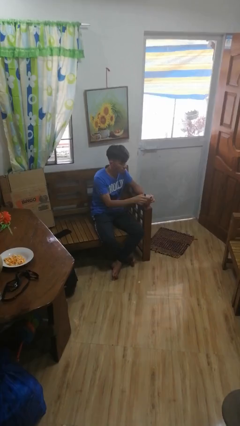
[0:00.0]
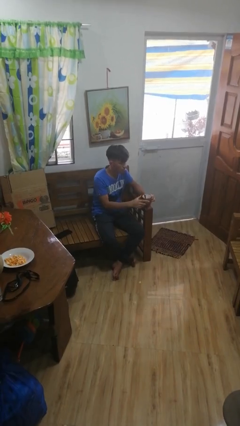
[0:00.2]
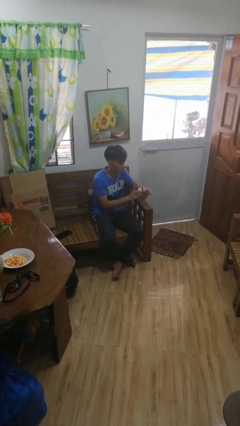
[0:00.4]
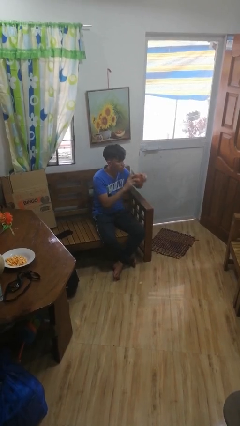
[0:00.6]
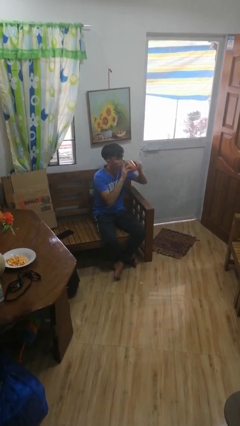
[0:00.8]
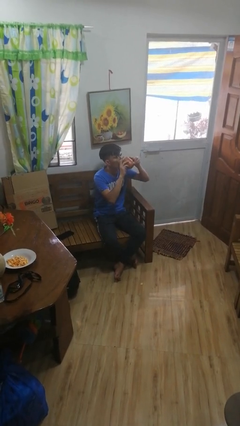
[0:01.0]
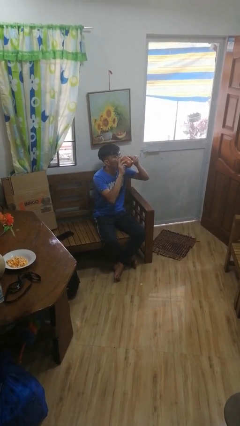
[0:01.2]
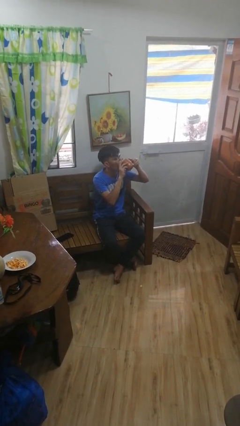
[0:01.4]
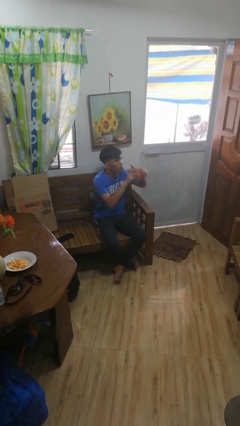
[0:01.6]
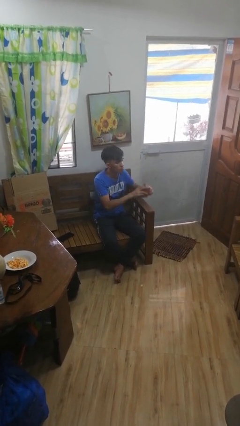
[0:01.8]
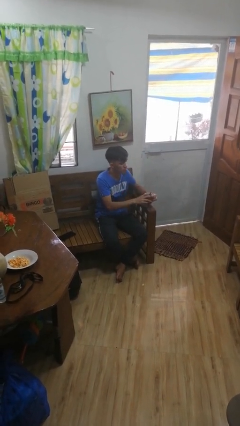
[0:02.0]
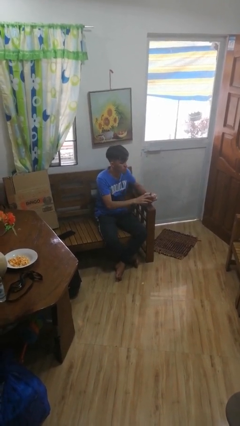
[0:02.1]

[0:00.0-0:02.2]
person drinks from mug

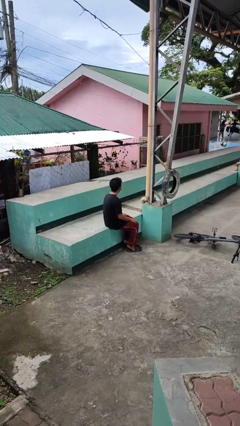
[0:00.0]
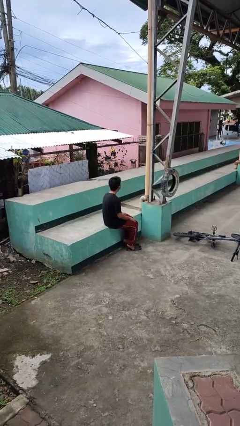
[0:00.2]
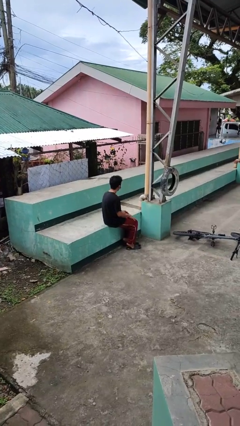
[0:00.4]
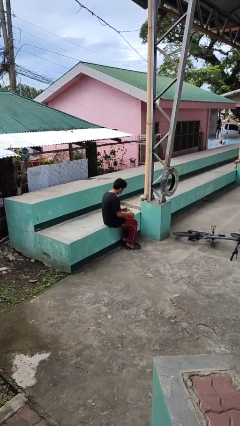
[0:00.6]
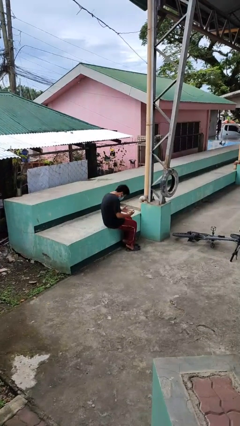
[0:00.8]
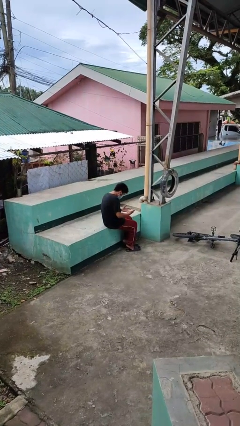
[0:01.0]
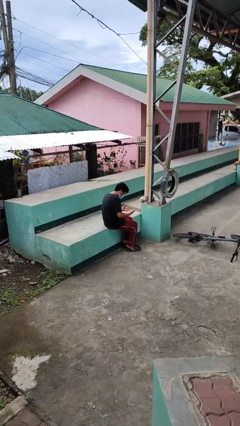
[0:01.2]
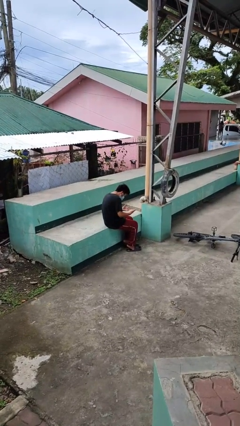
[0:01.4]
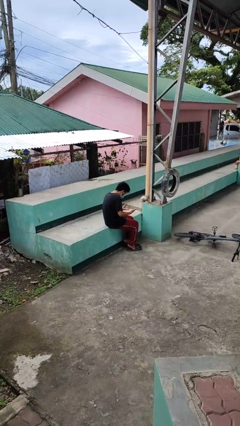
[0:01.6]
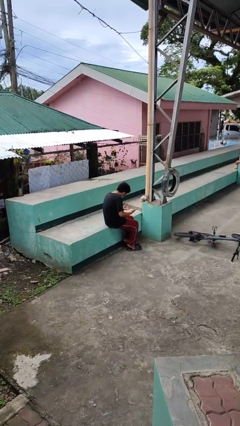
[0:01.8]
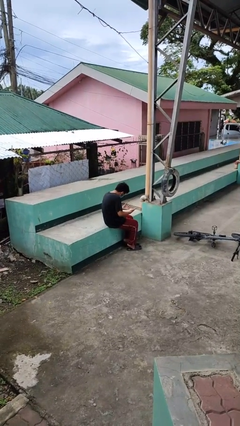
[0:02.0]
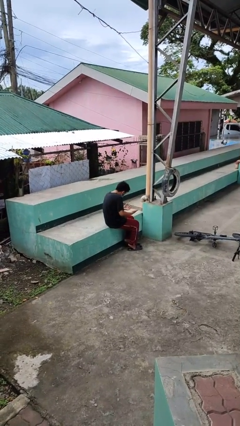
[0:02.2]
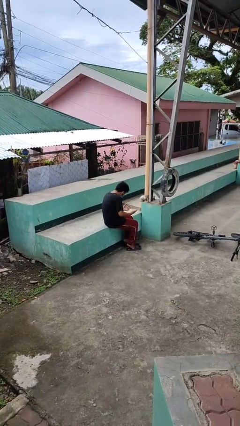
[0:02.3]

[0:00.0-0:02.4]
person looks at hands in lap

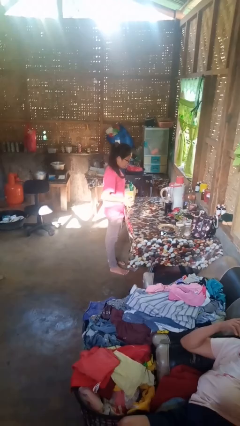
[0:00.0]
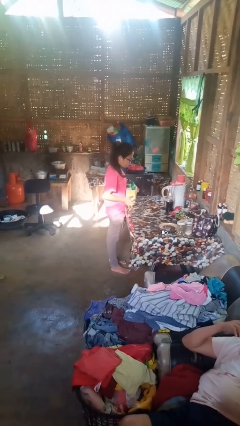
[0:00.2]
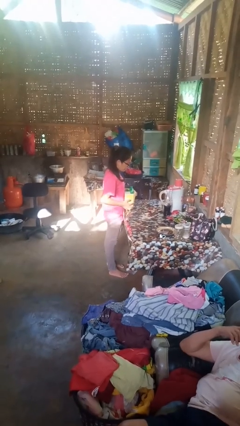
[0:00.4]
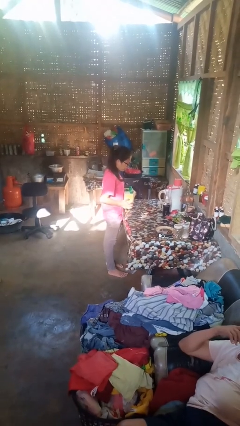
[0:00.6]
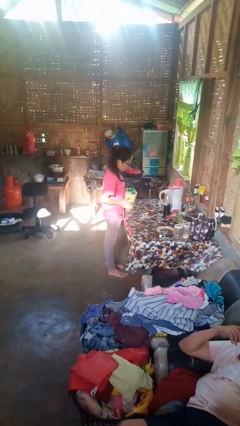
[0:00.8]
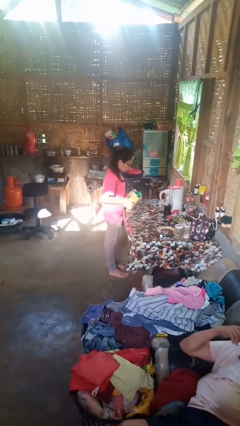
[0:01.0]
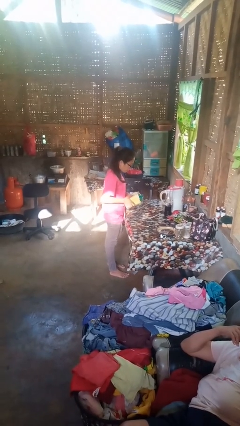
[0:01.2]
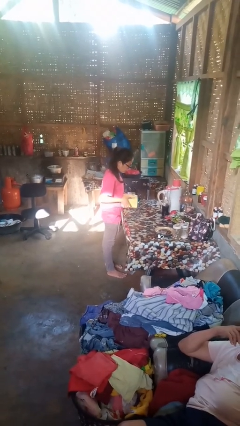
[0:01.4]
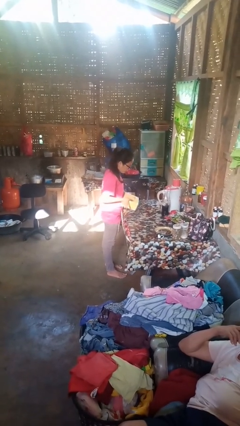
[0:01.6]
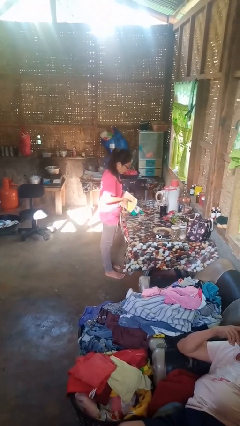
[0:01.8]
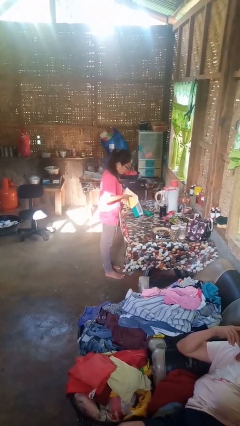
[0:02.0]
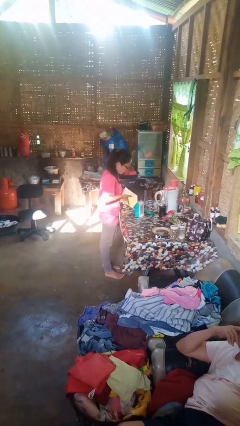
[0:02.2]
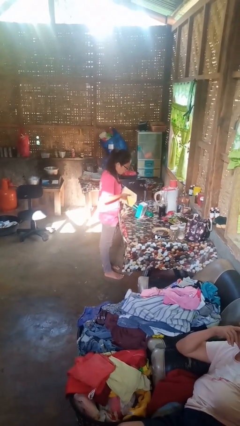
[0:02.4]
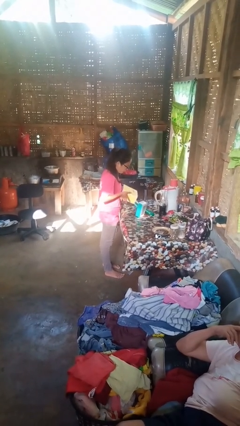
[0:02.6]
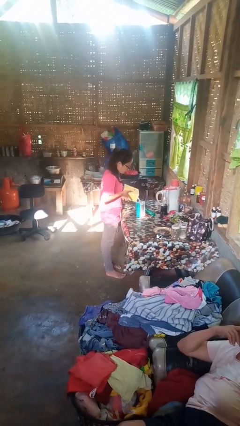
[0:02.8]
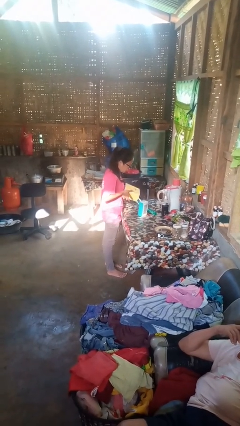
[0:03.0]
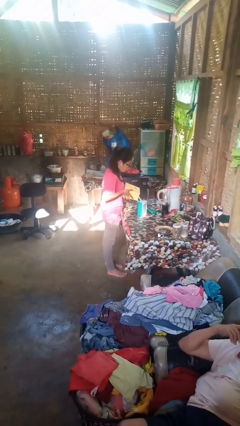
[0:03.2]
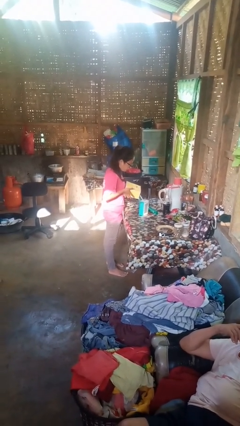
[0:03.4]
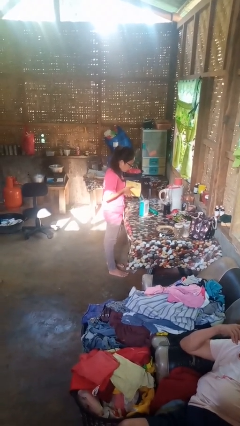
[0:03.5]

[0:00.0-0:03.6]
person unloads box onto table

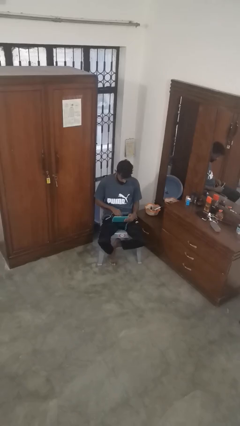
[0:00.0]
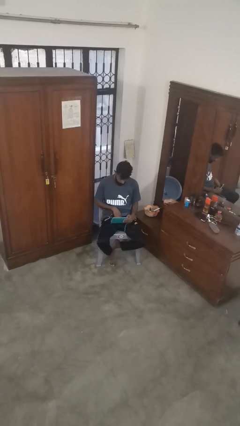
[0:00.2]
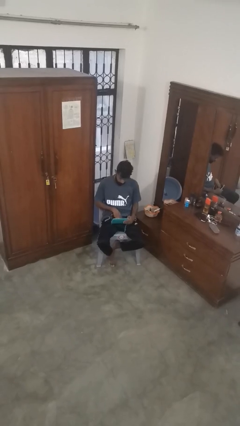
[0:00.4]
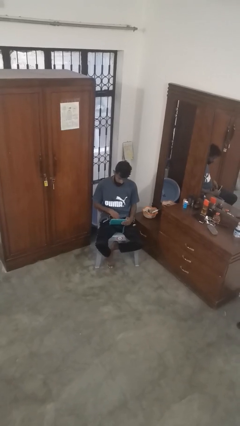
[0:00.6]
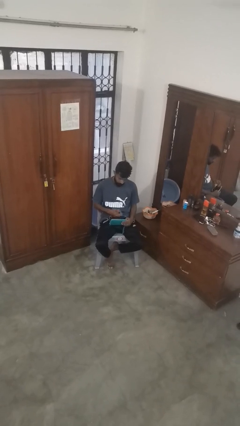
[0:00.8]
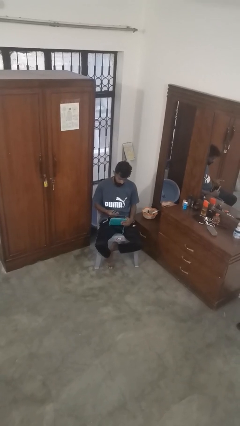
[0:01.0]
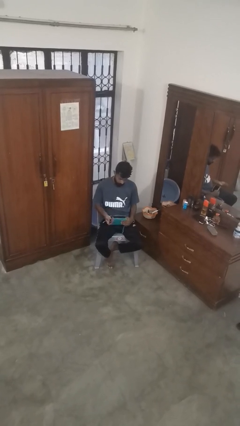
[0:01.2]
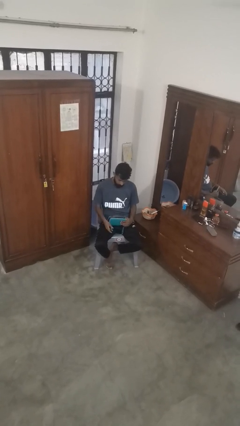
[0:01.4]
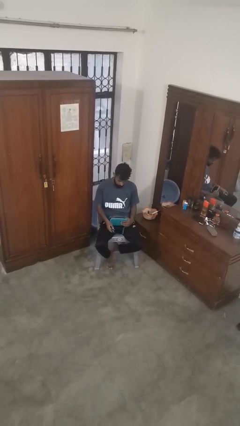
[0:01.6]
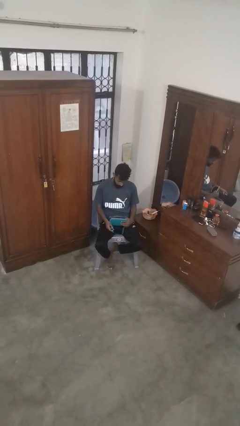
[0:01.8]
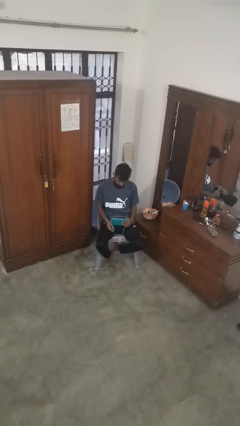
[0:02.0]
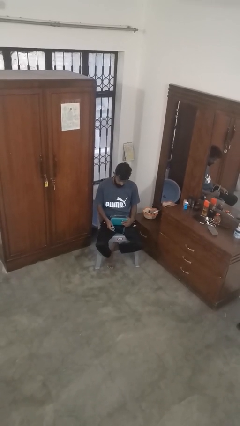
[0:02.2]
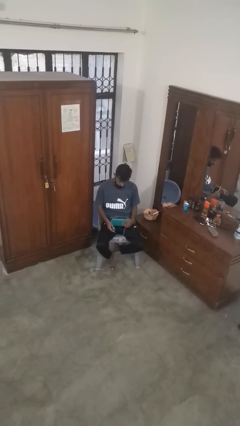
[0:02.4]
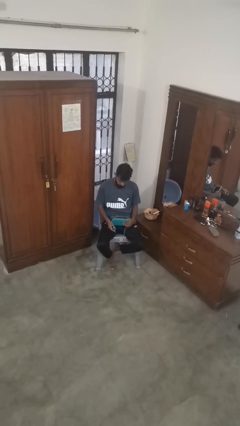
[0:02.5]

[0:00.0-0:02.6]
person takes object from purse

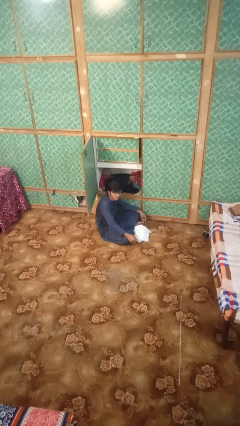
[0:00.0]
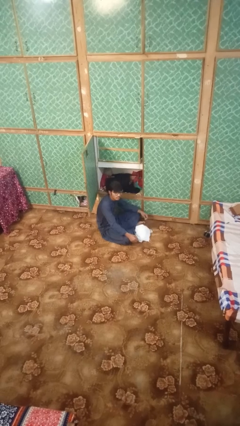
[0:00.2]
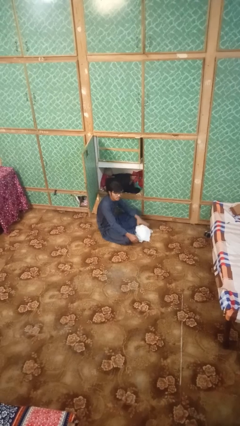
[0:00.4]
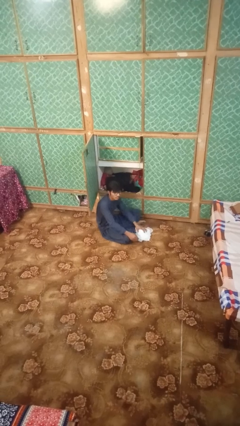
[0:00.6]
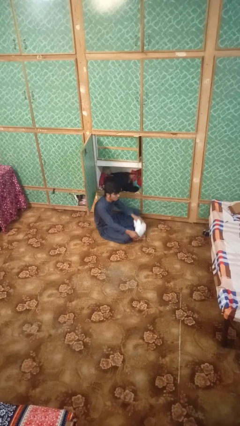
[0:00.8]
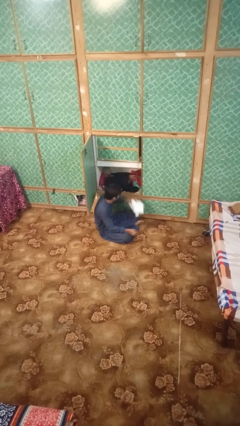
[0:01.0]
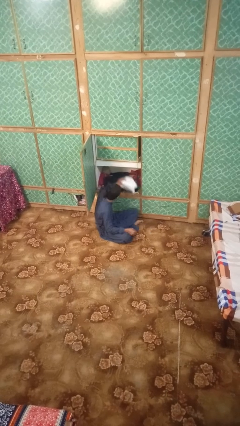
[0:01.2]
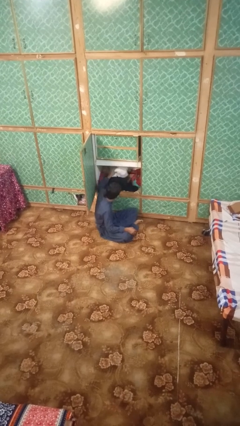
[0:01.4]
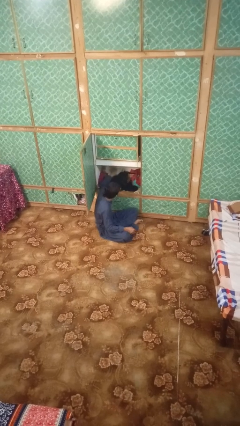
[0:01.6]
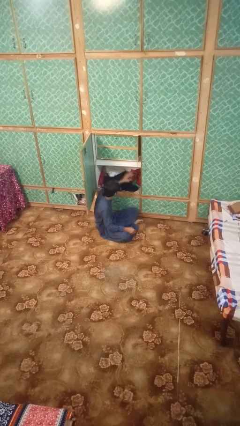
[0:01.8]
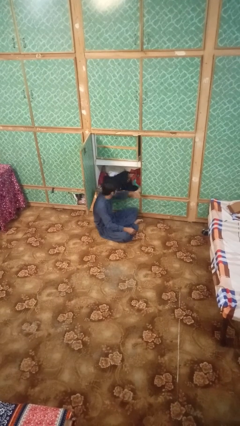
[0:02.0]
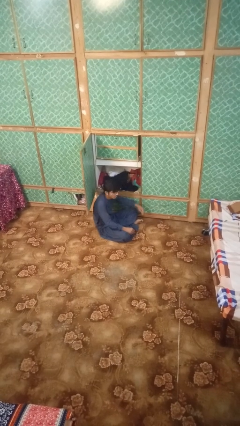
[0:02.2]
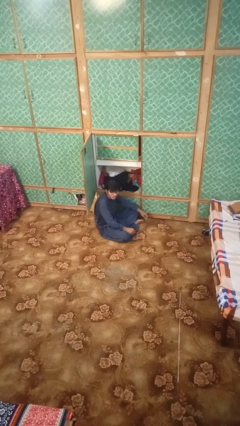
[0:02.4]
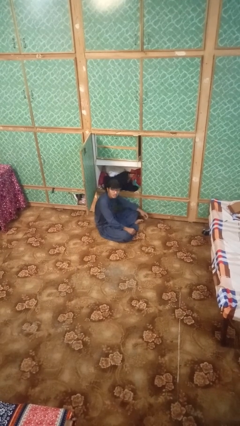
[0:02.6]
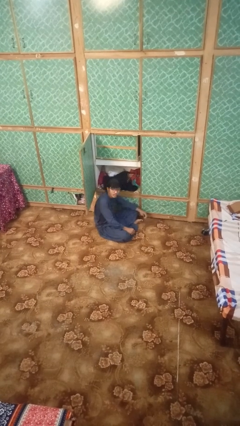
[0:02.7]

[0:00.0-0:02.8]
person puts clothes into dresser

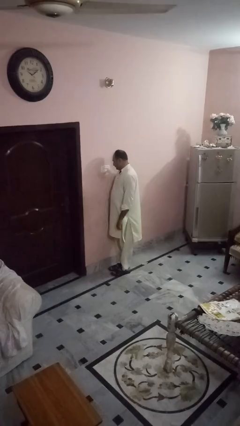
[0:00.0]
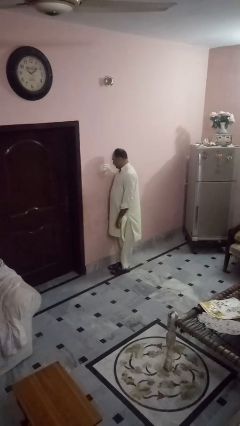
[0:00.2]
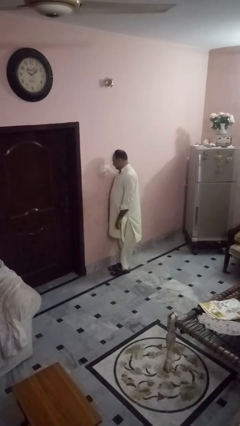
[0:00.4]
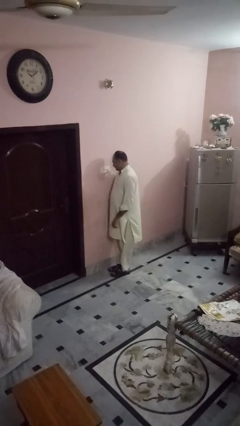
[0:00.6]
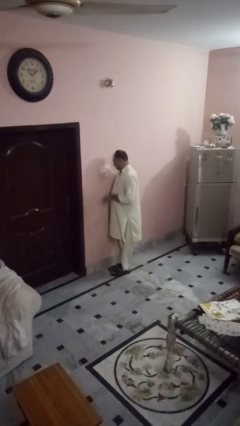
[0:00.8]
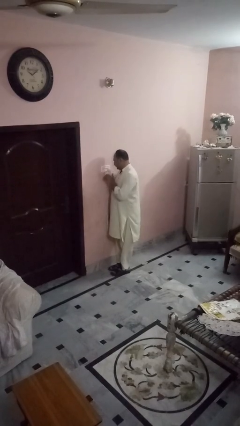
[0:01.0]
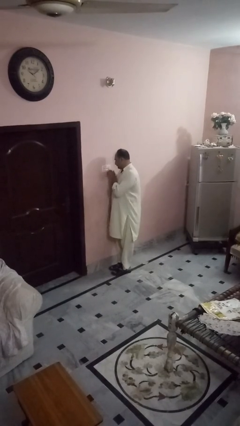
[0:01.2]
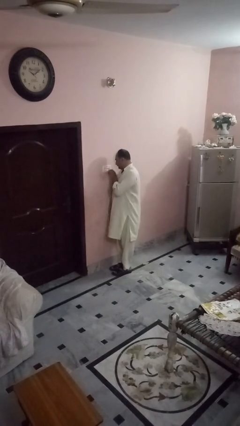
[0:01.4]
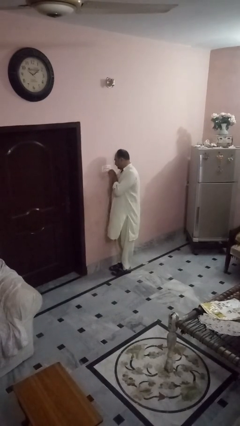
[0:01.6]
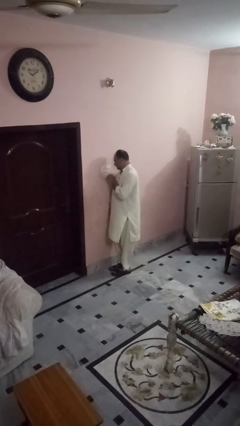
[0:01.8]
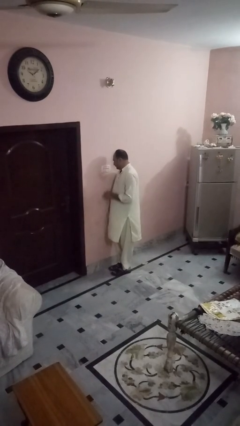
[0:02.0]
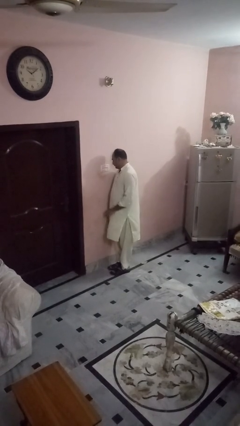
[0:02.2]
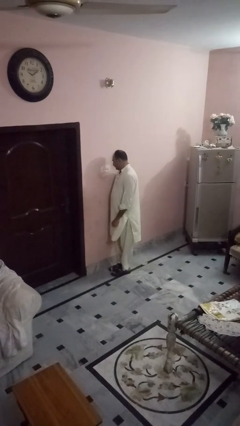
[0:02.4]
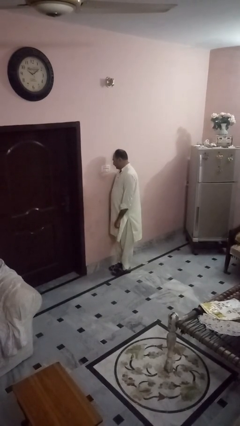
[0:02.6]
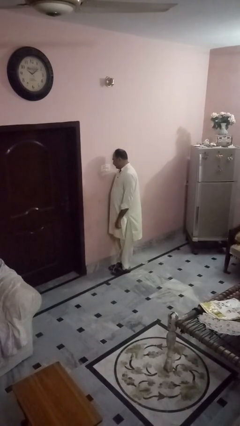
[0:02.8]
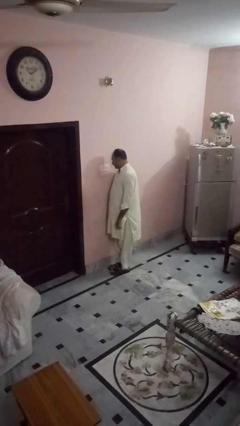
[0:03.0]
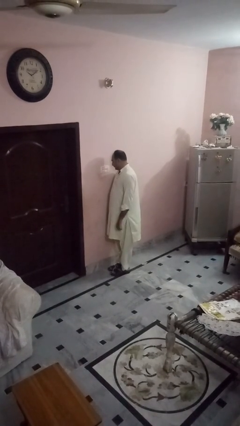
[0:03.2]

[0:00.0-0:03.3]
person unplugs from electrical socket

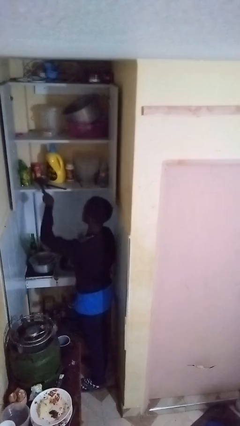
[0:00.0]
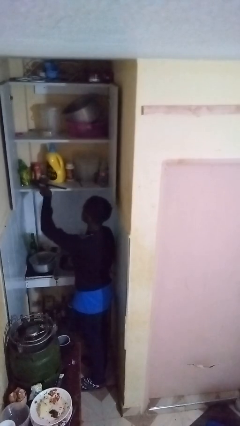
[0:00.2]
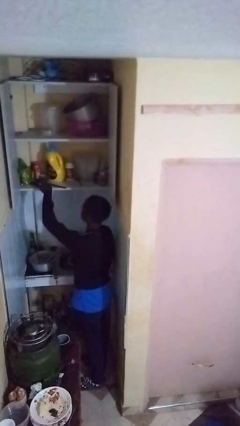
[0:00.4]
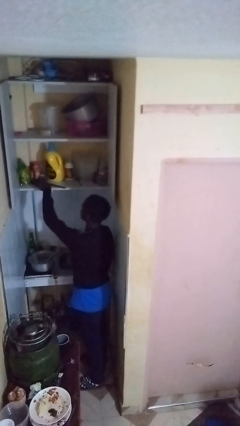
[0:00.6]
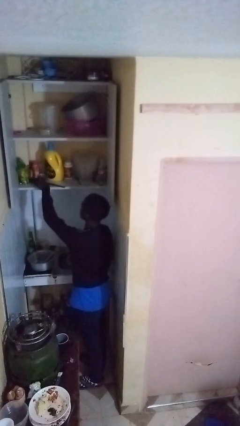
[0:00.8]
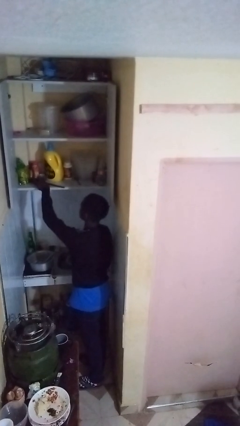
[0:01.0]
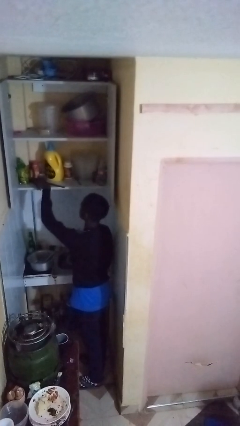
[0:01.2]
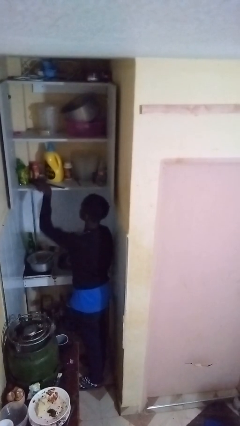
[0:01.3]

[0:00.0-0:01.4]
person puts object into kitchen drawer